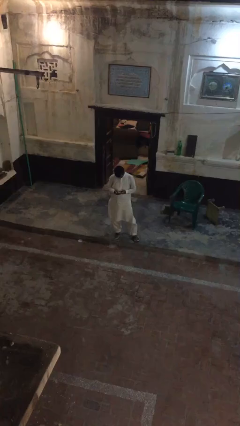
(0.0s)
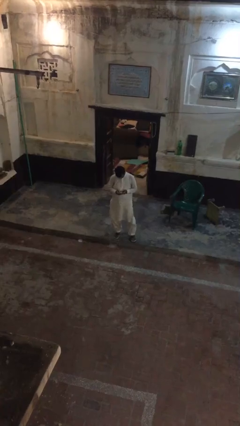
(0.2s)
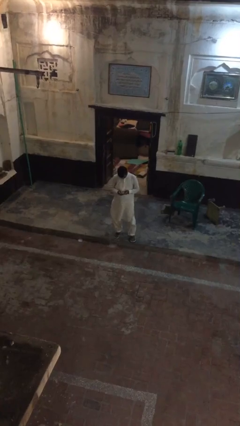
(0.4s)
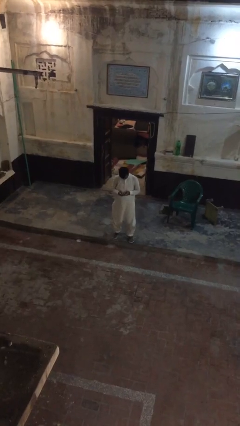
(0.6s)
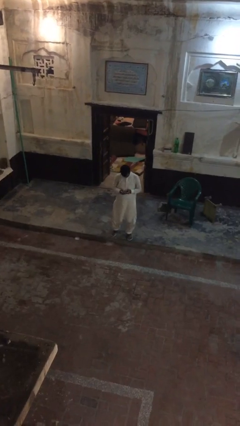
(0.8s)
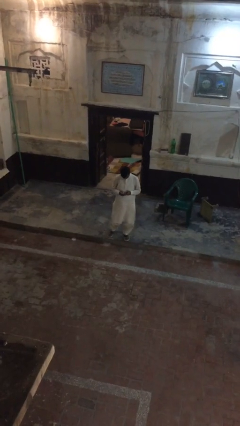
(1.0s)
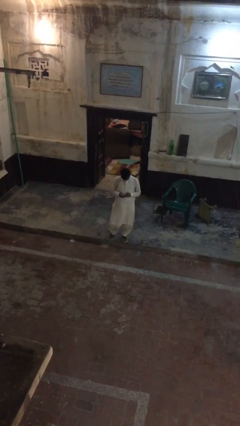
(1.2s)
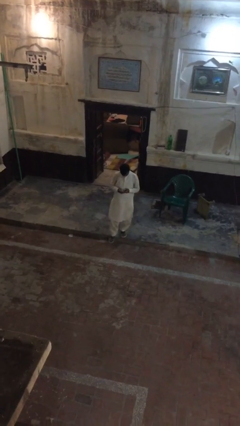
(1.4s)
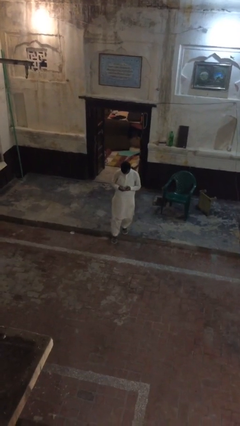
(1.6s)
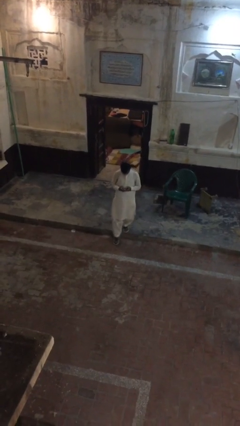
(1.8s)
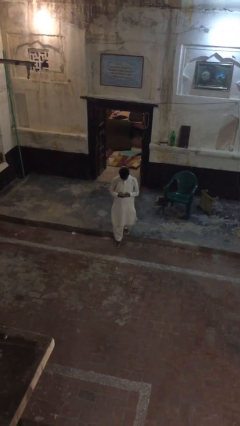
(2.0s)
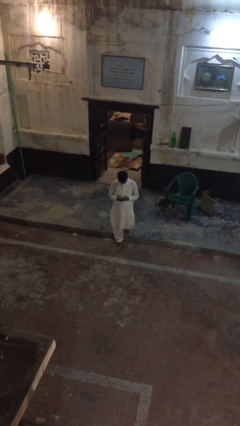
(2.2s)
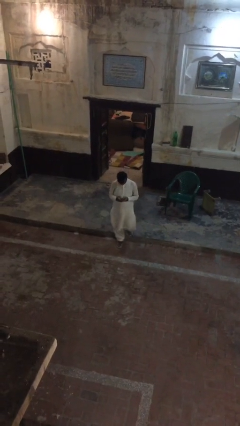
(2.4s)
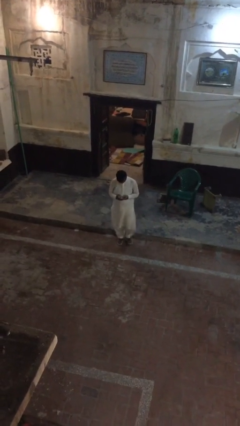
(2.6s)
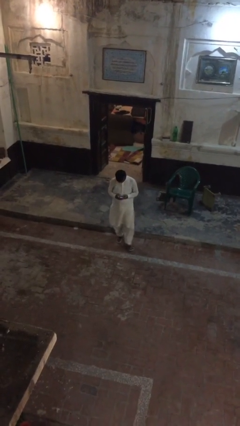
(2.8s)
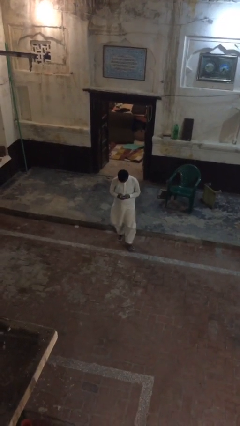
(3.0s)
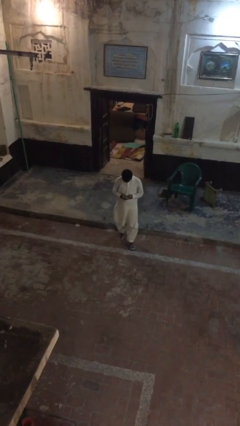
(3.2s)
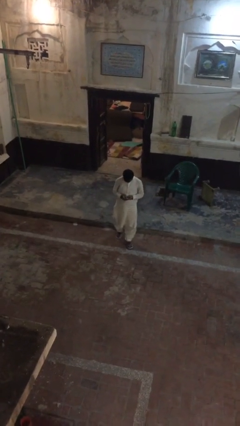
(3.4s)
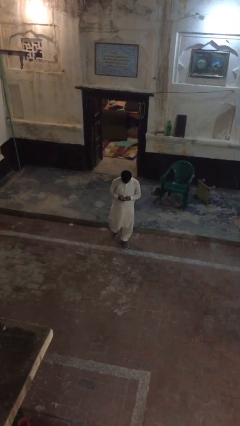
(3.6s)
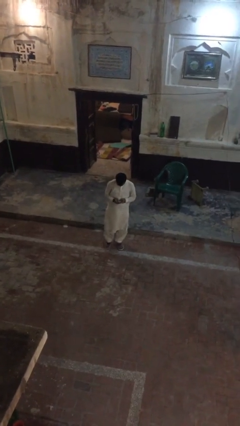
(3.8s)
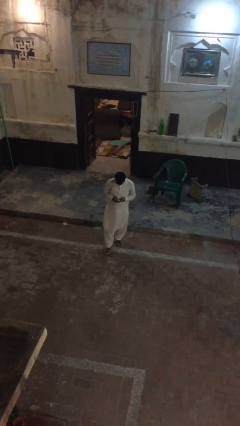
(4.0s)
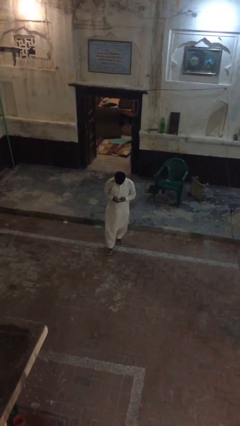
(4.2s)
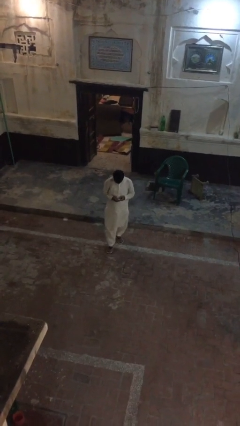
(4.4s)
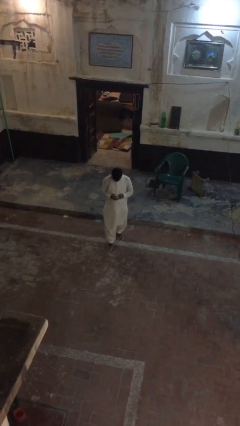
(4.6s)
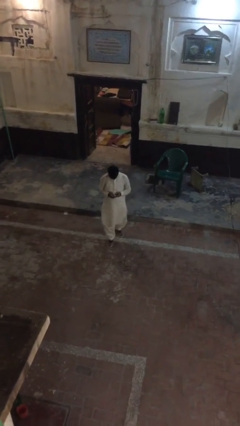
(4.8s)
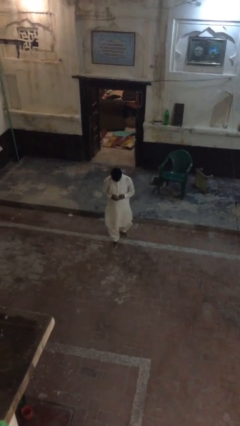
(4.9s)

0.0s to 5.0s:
person texts on phone

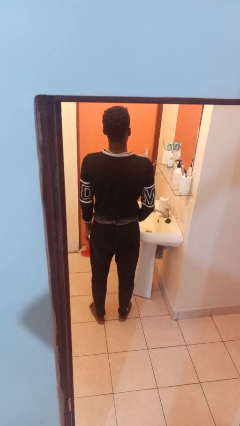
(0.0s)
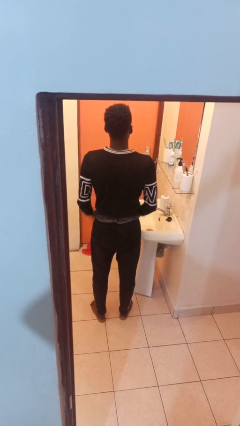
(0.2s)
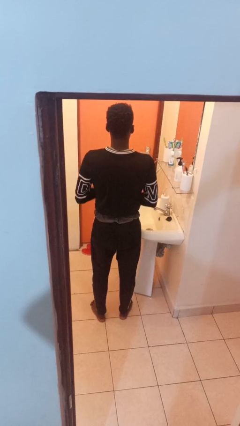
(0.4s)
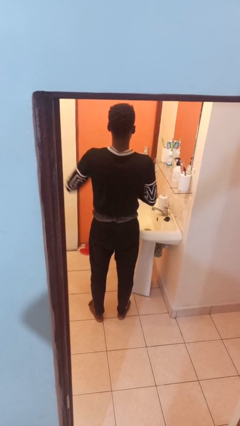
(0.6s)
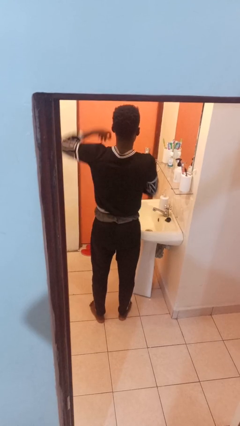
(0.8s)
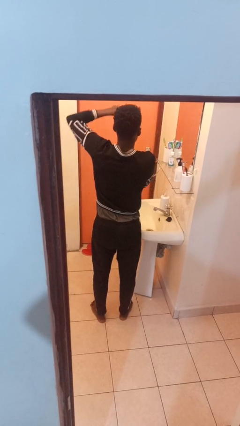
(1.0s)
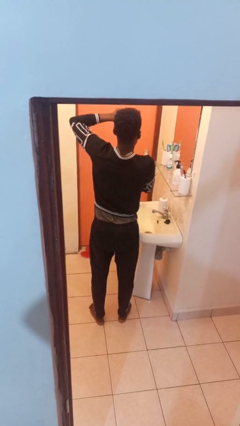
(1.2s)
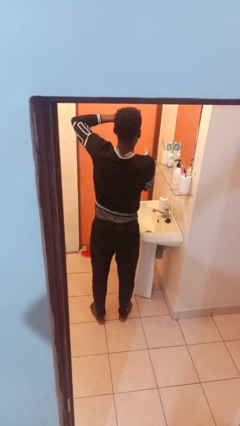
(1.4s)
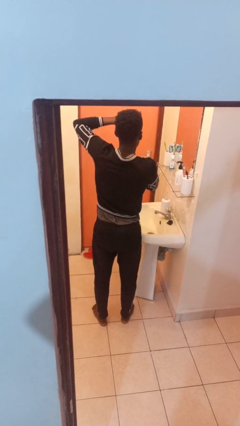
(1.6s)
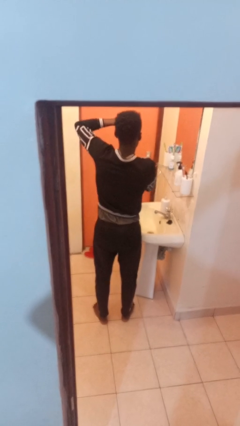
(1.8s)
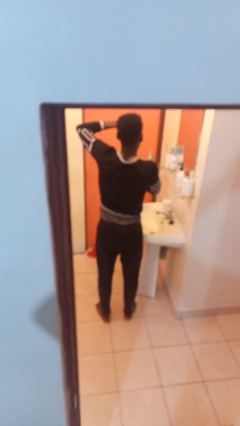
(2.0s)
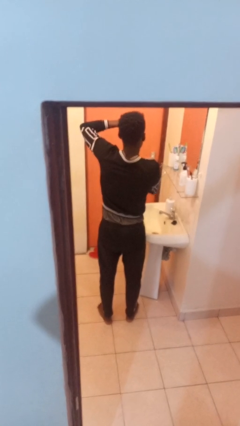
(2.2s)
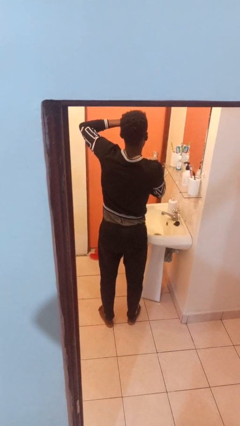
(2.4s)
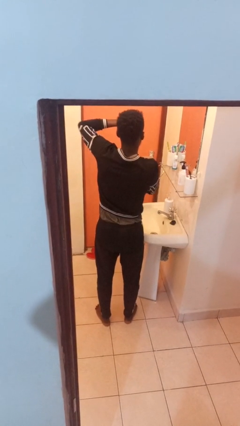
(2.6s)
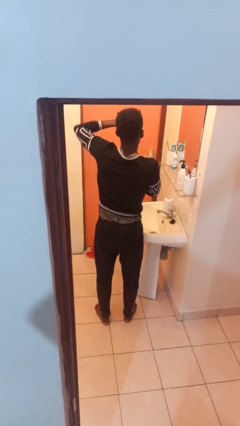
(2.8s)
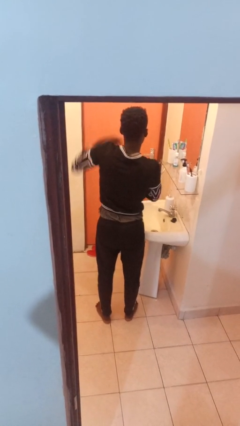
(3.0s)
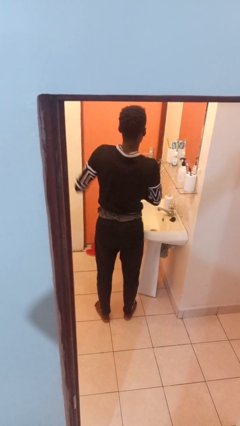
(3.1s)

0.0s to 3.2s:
person applies deodorant

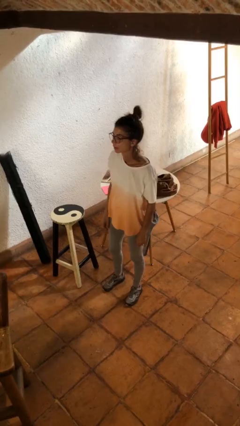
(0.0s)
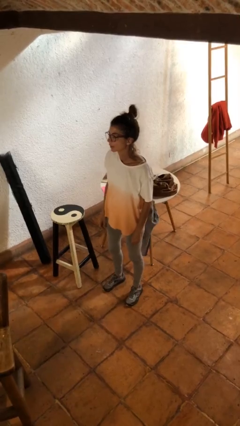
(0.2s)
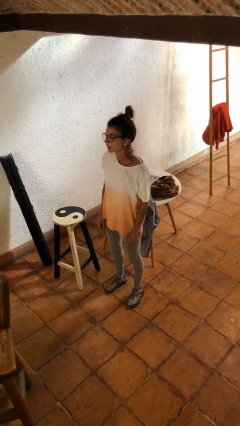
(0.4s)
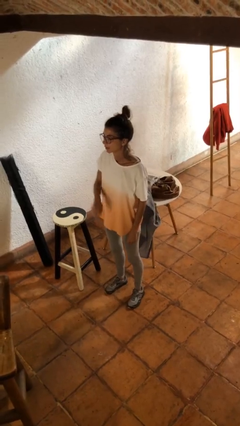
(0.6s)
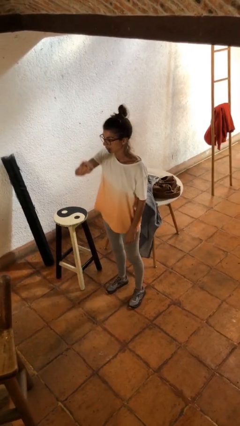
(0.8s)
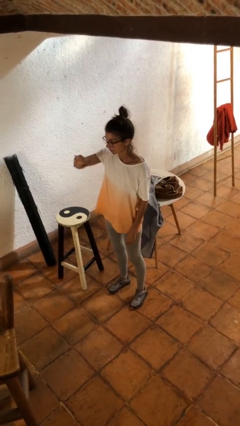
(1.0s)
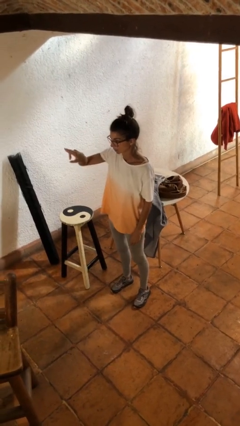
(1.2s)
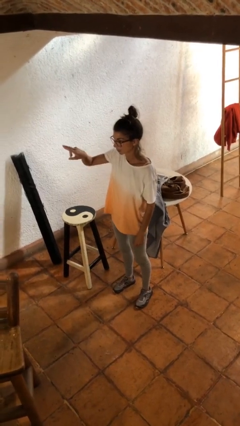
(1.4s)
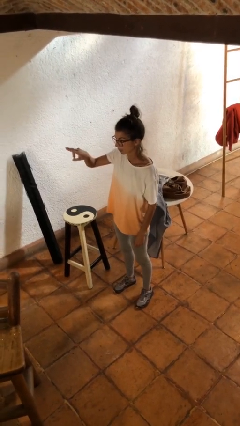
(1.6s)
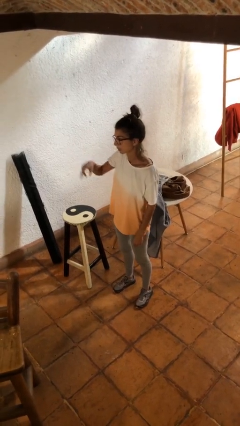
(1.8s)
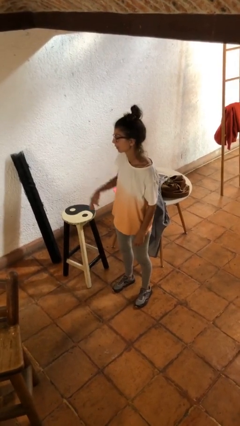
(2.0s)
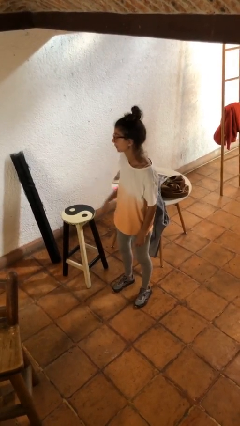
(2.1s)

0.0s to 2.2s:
person gestures swipe right

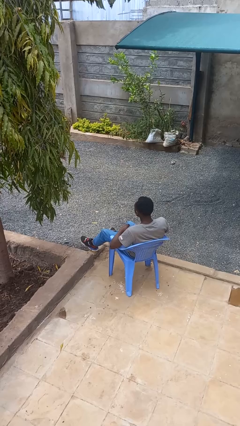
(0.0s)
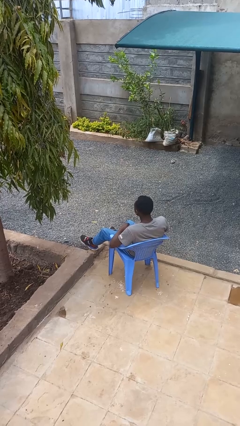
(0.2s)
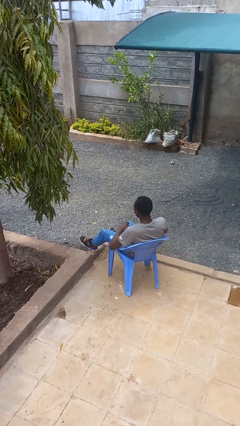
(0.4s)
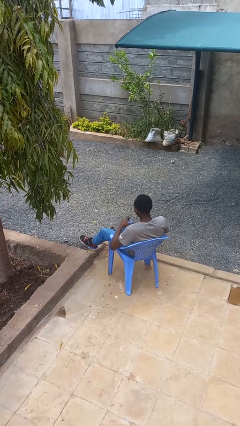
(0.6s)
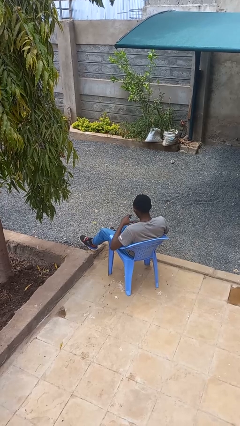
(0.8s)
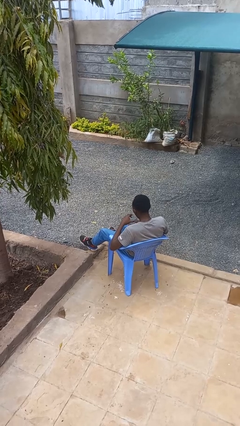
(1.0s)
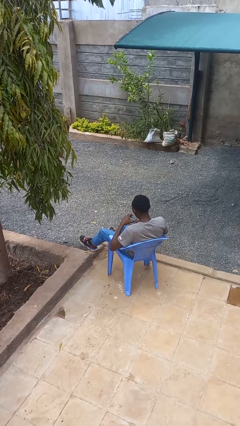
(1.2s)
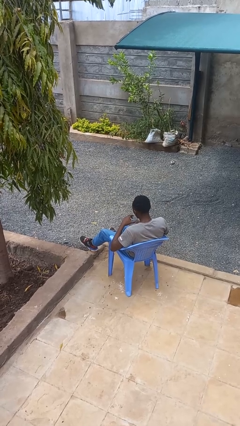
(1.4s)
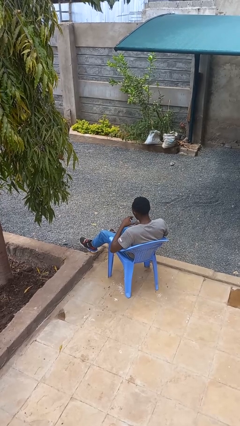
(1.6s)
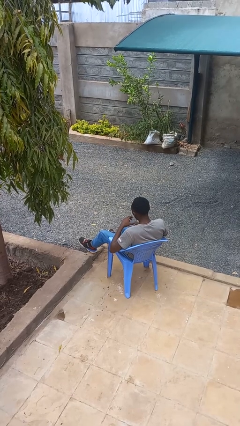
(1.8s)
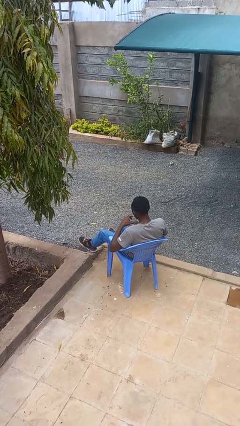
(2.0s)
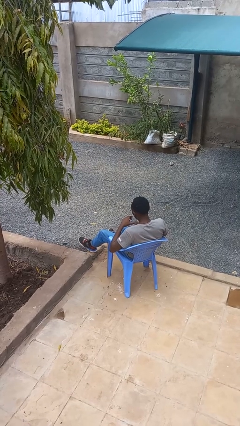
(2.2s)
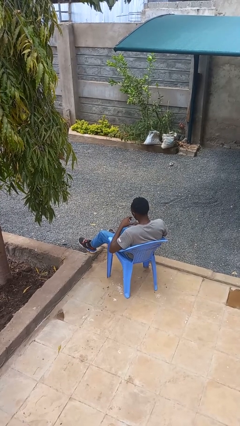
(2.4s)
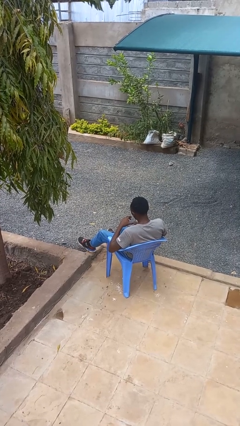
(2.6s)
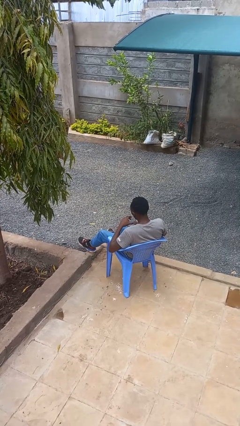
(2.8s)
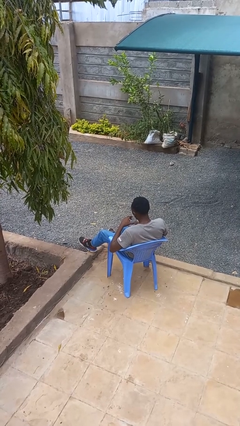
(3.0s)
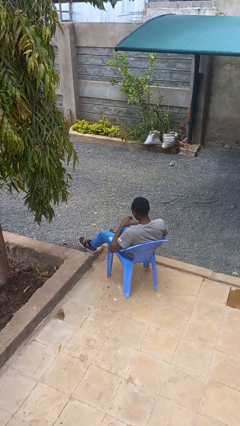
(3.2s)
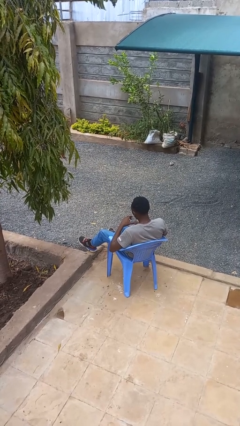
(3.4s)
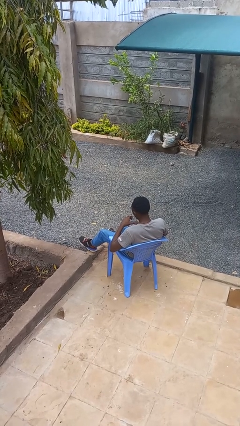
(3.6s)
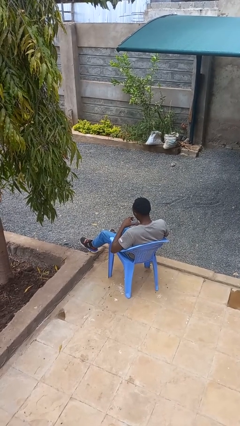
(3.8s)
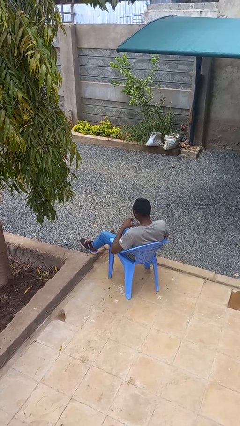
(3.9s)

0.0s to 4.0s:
person drinks from straw

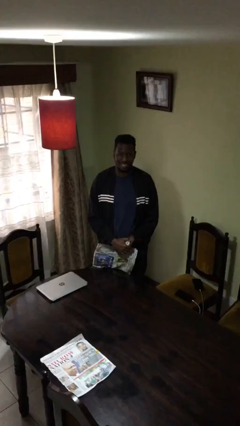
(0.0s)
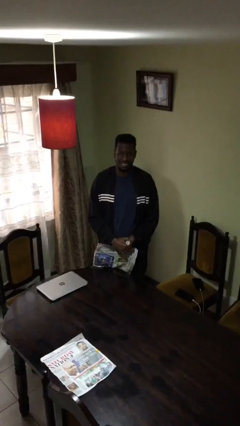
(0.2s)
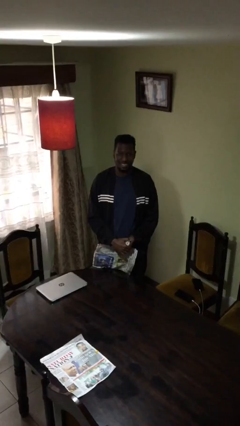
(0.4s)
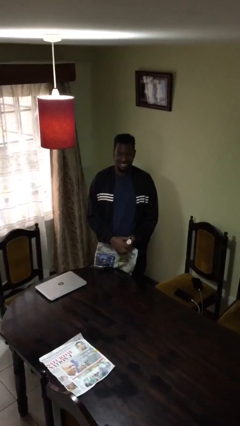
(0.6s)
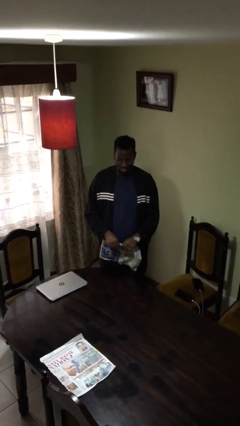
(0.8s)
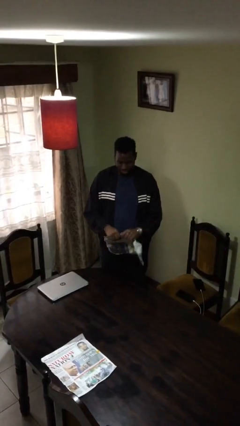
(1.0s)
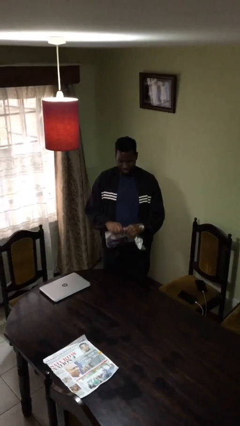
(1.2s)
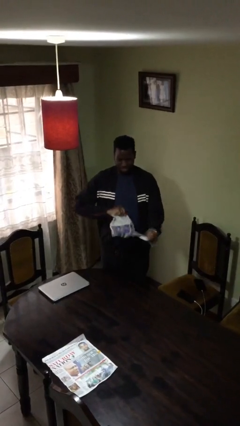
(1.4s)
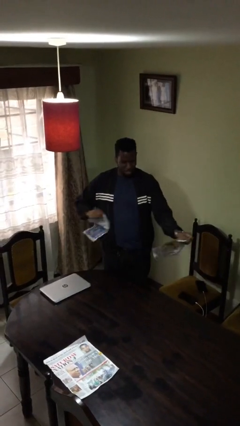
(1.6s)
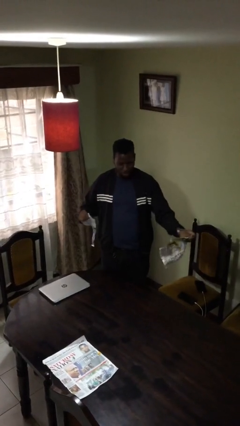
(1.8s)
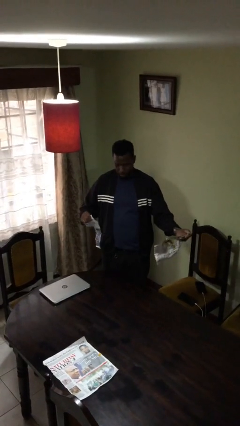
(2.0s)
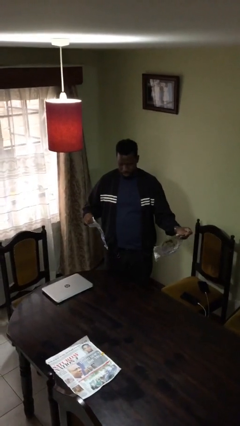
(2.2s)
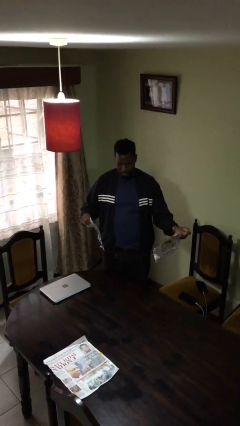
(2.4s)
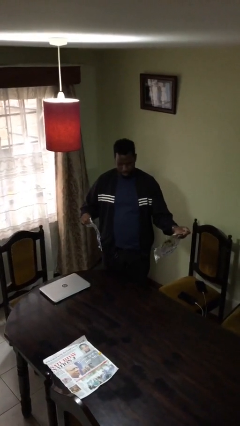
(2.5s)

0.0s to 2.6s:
person tears paper

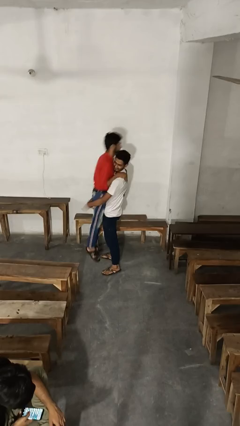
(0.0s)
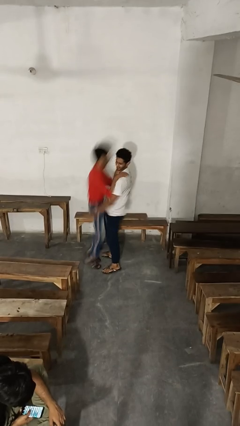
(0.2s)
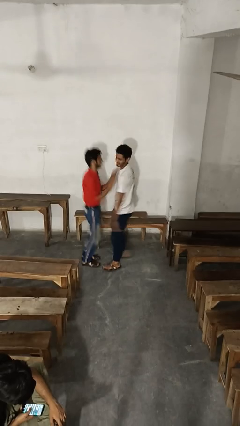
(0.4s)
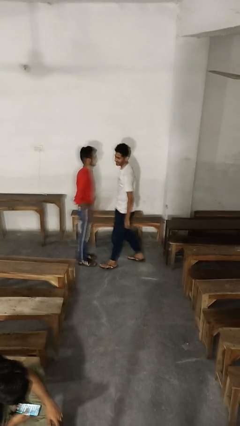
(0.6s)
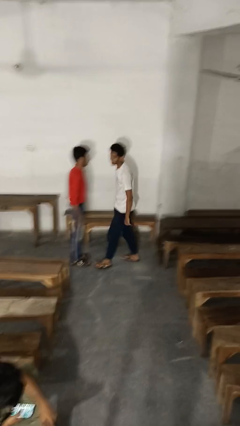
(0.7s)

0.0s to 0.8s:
person puts down person
